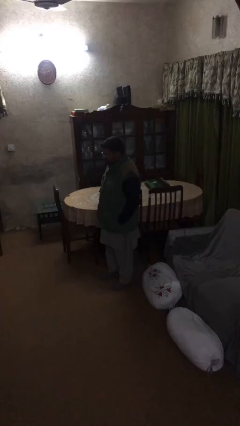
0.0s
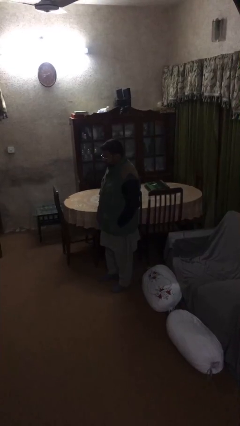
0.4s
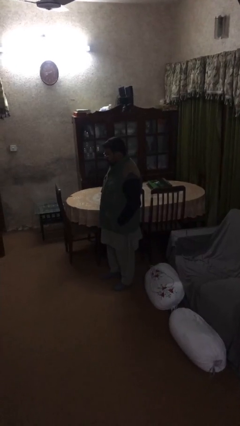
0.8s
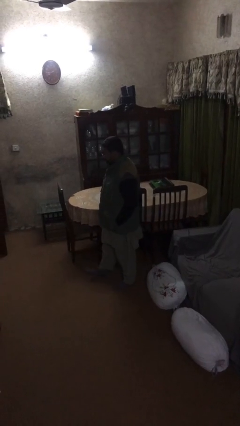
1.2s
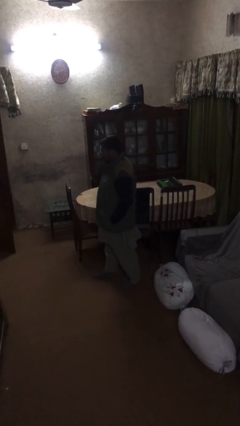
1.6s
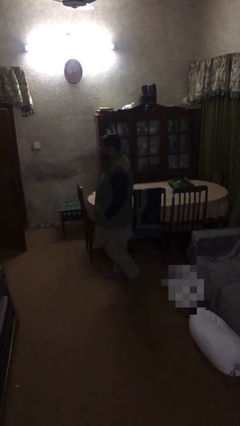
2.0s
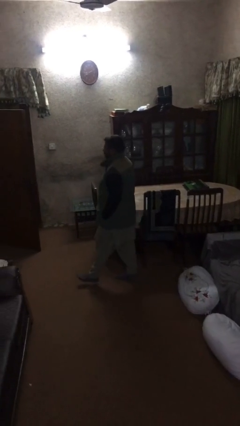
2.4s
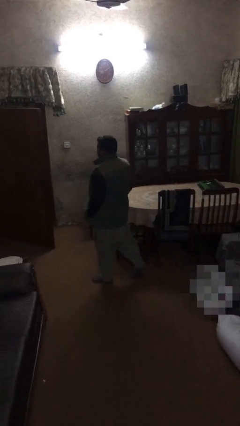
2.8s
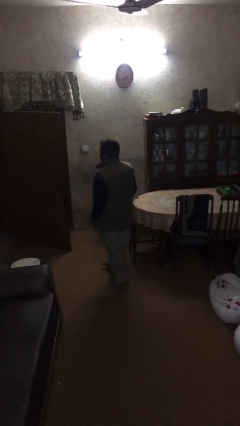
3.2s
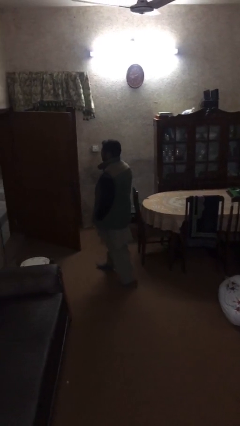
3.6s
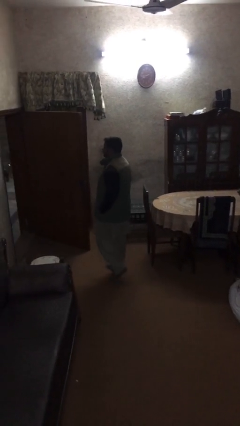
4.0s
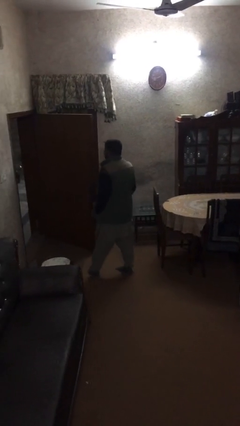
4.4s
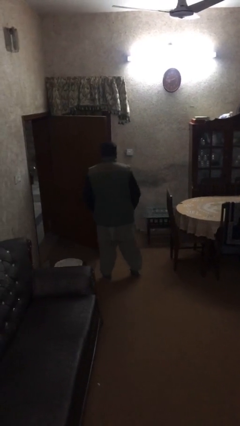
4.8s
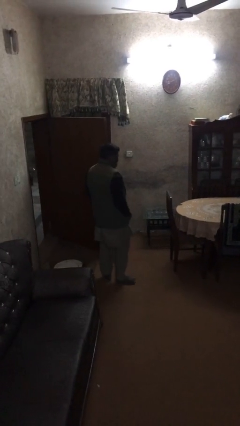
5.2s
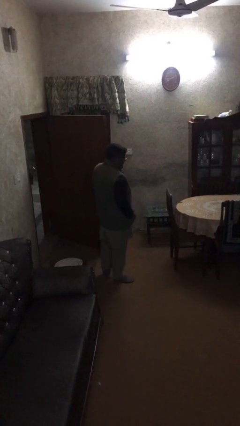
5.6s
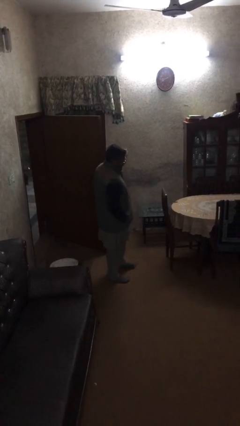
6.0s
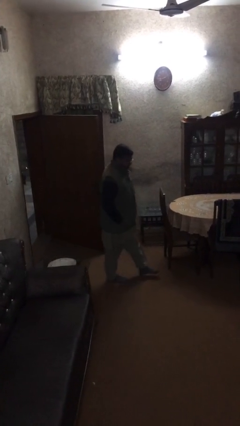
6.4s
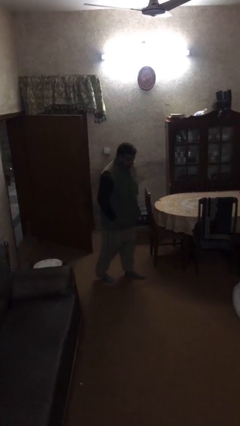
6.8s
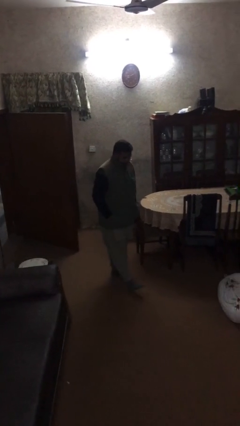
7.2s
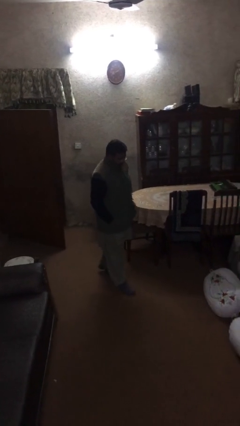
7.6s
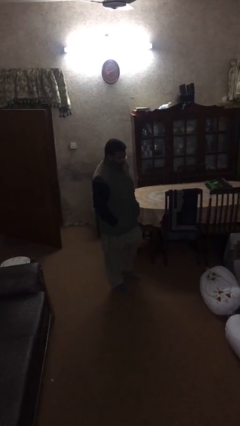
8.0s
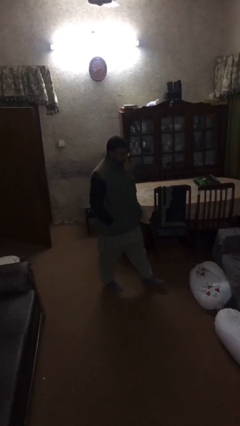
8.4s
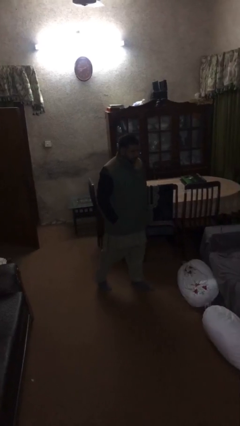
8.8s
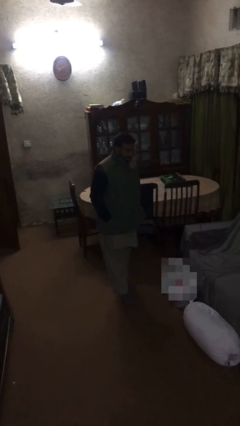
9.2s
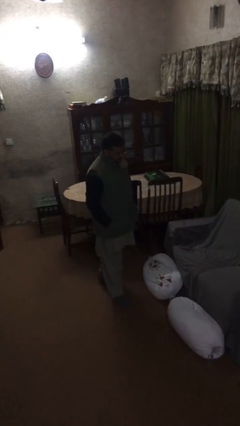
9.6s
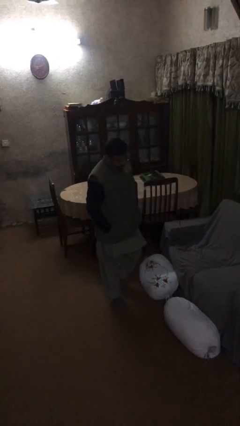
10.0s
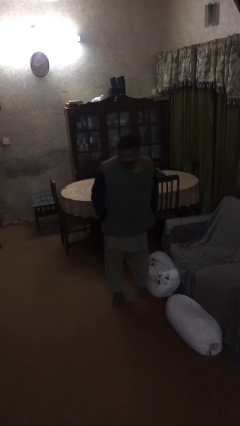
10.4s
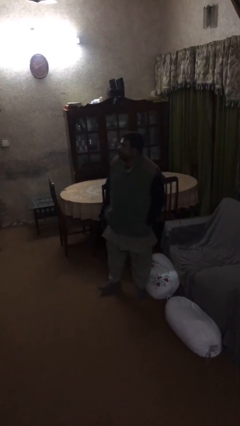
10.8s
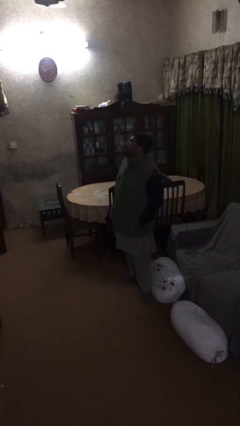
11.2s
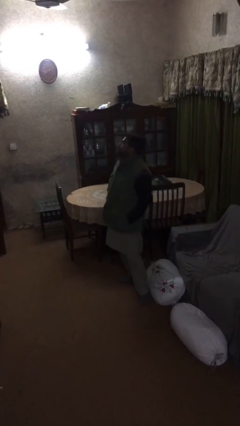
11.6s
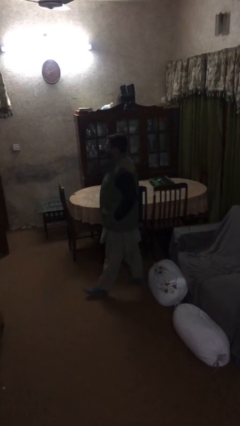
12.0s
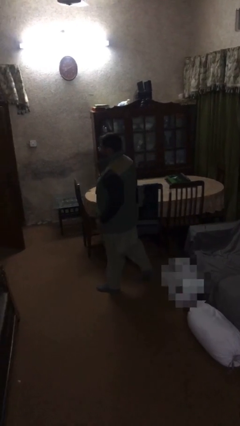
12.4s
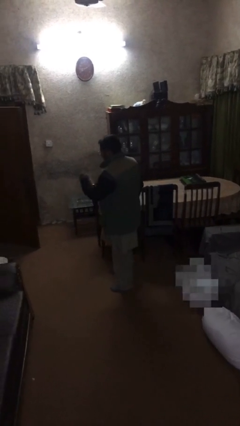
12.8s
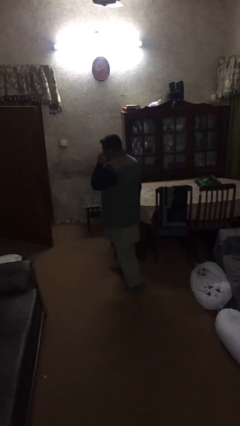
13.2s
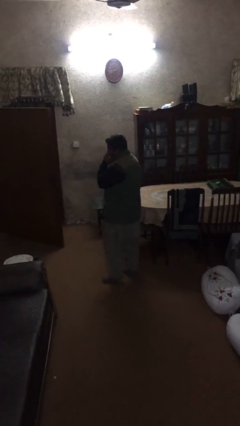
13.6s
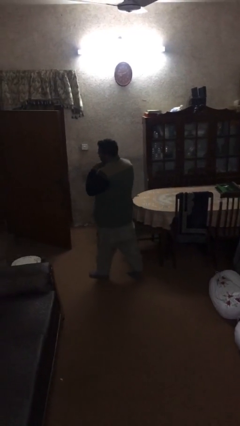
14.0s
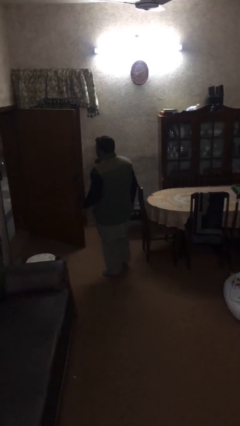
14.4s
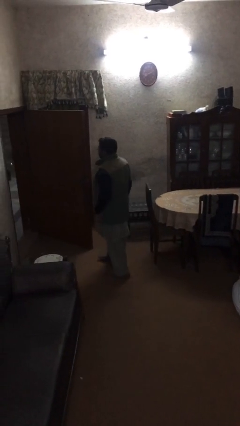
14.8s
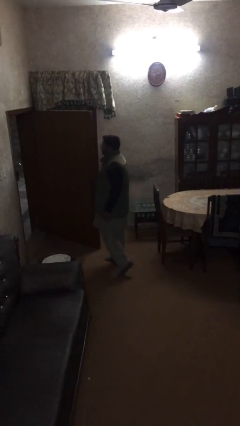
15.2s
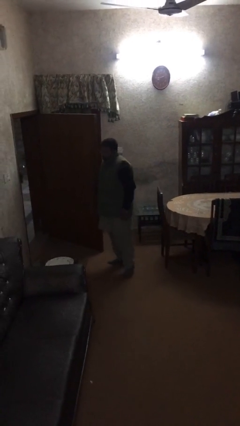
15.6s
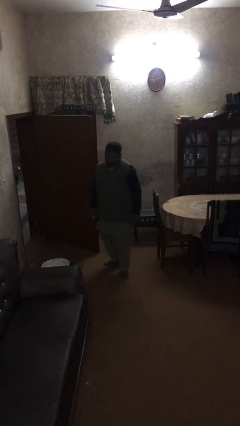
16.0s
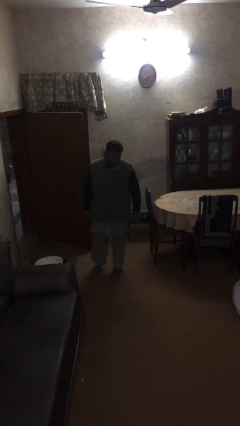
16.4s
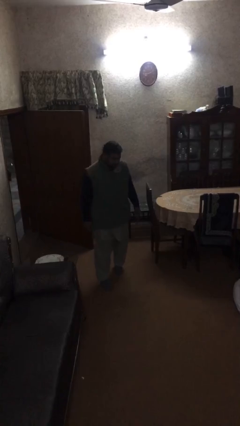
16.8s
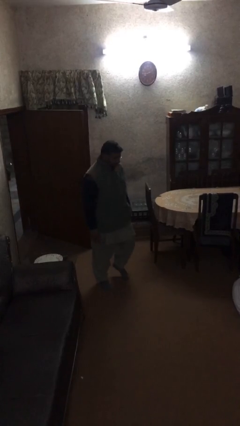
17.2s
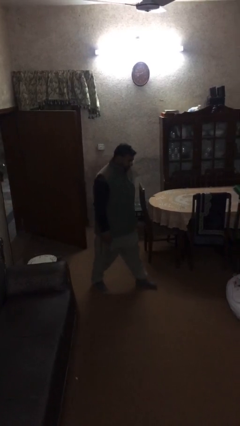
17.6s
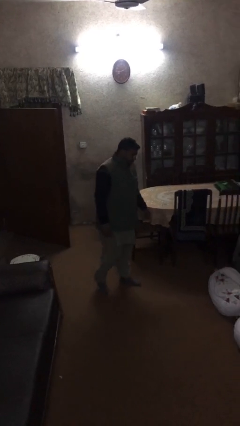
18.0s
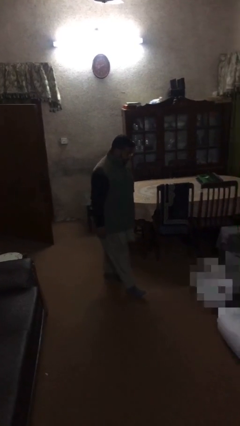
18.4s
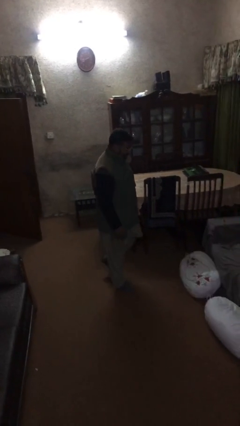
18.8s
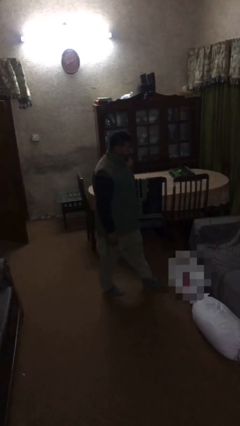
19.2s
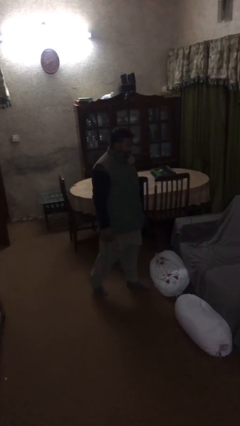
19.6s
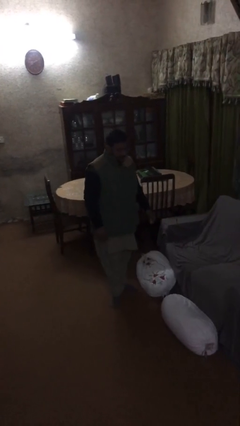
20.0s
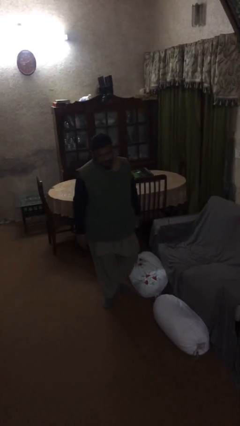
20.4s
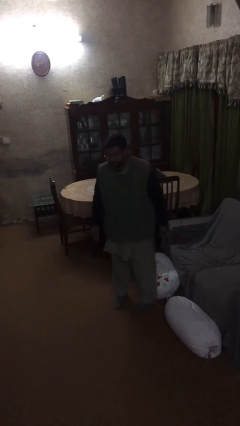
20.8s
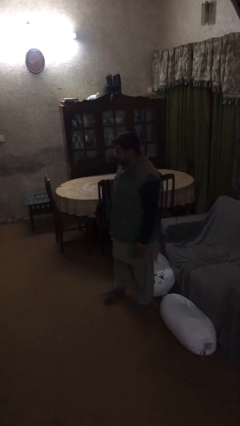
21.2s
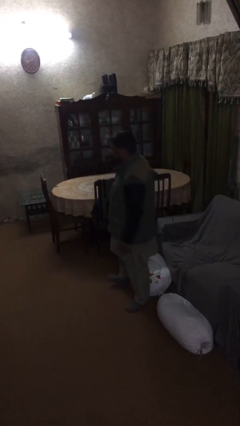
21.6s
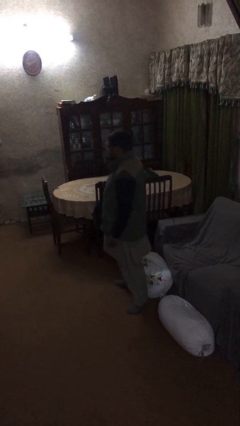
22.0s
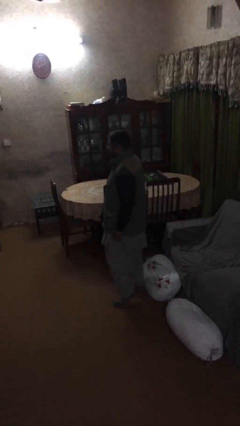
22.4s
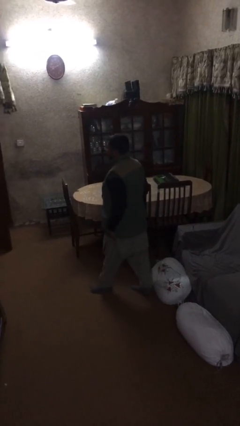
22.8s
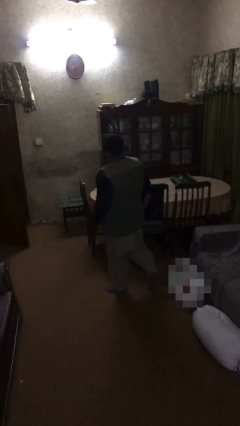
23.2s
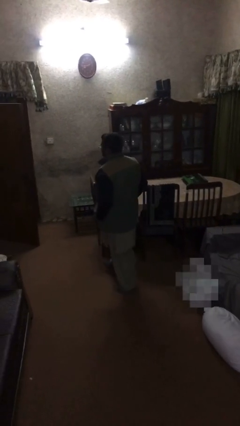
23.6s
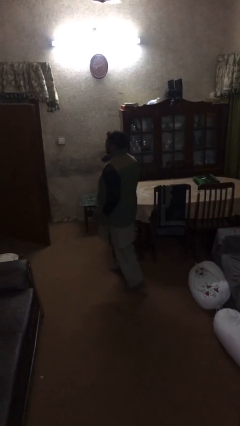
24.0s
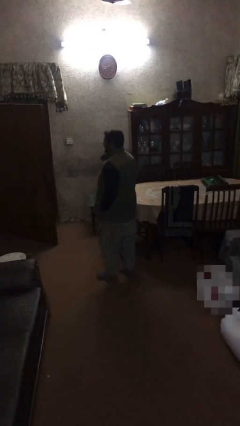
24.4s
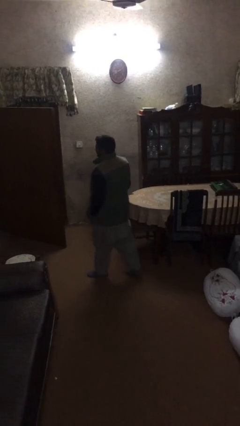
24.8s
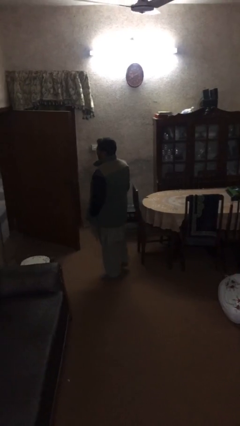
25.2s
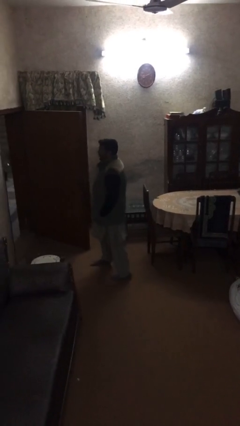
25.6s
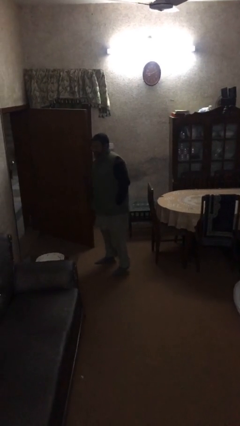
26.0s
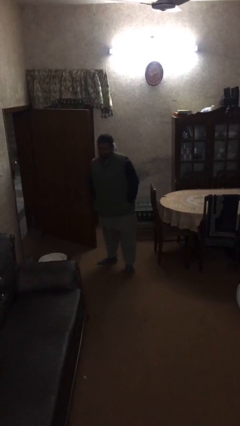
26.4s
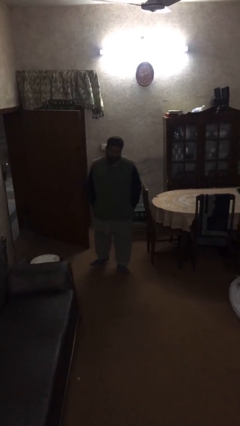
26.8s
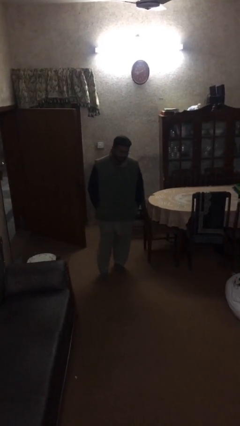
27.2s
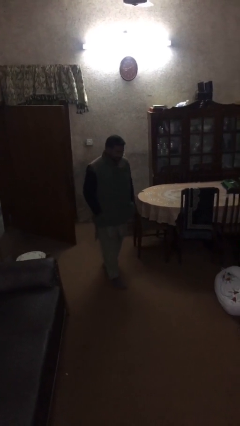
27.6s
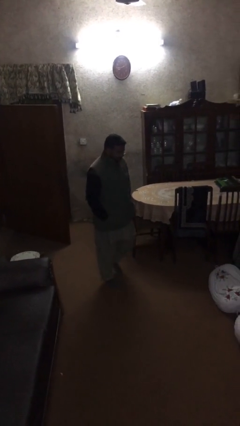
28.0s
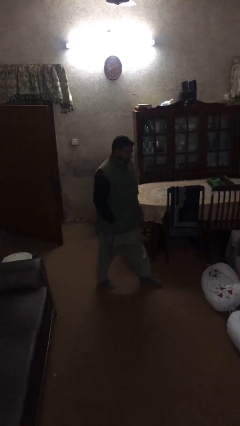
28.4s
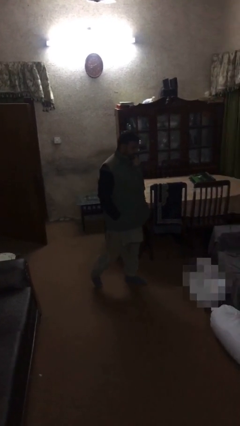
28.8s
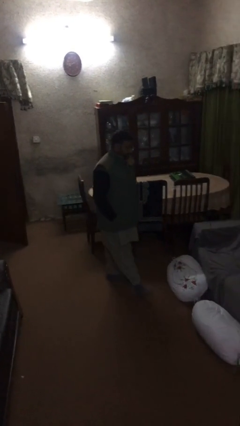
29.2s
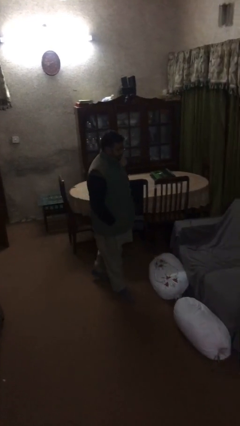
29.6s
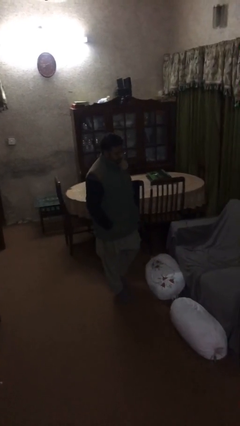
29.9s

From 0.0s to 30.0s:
person walks

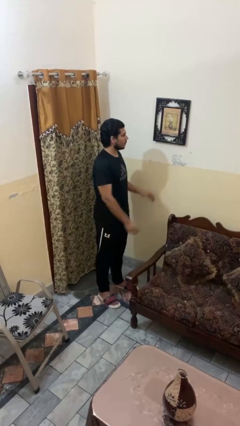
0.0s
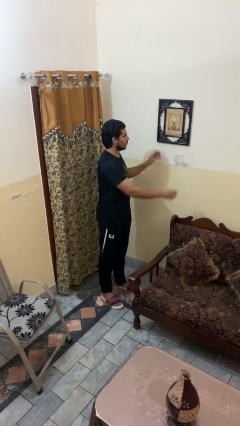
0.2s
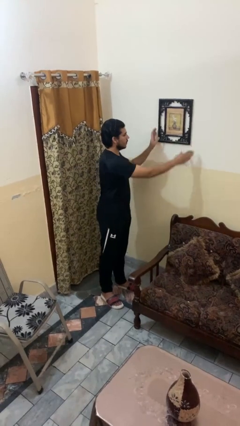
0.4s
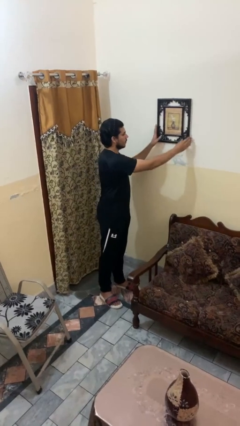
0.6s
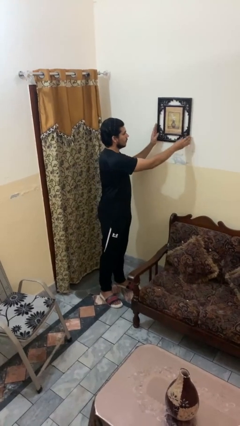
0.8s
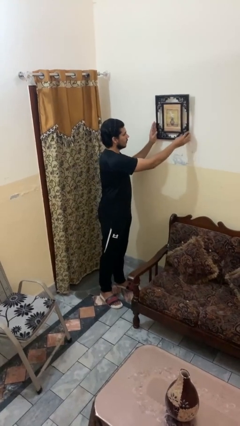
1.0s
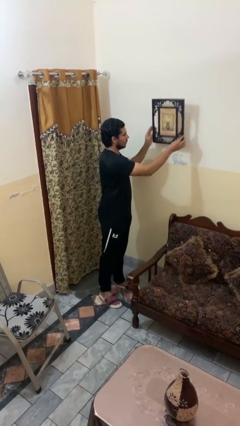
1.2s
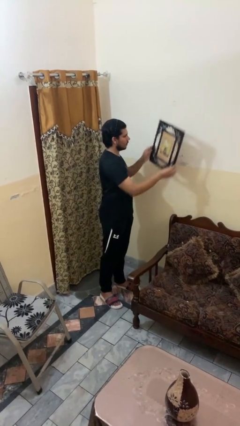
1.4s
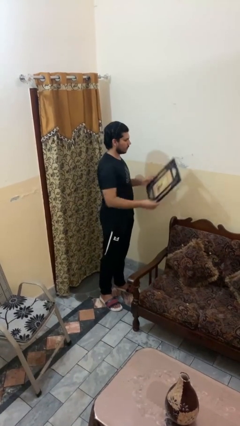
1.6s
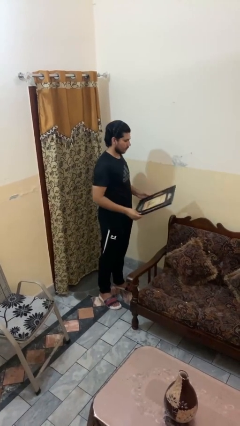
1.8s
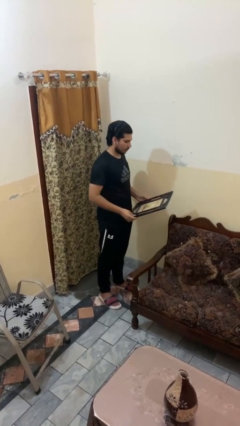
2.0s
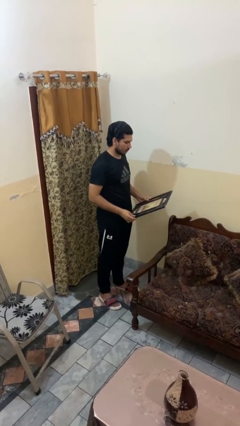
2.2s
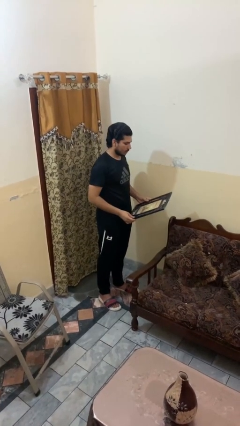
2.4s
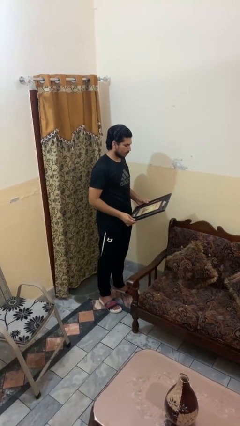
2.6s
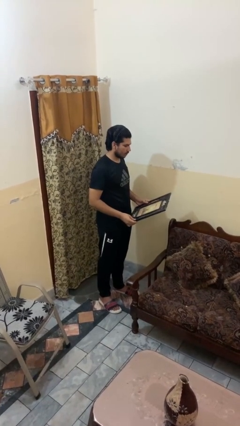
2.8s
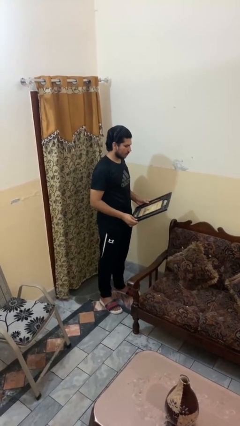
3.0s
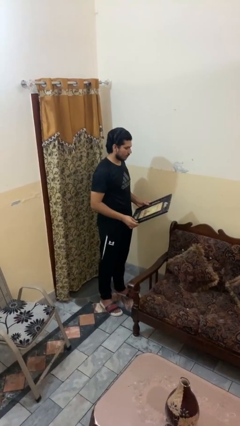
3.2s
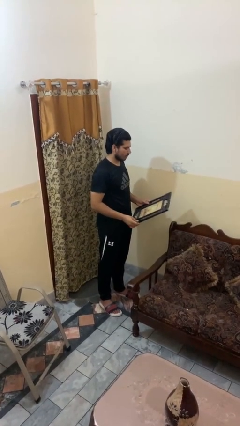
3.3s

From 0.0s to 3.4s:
person takes down picture frame
